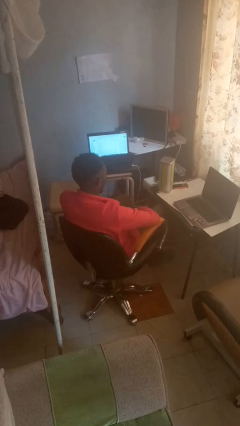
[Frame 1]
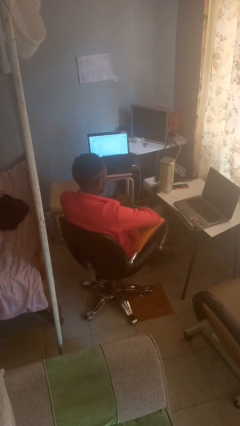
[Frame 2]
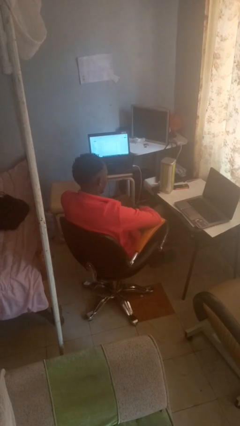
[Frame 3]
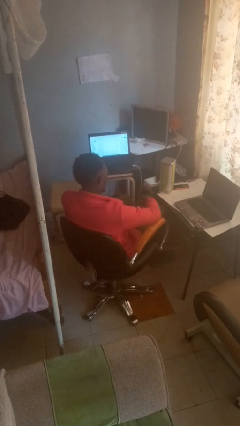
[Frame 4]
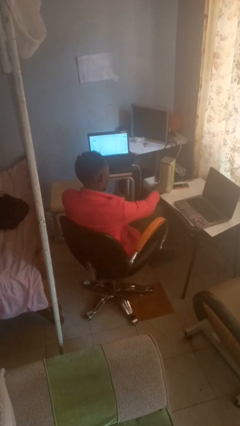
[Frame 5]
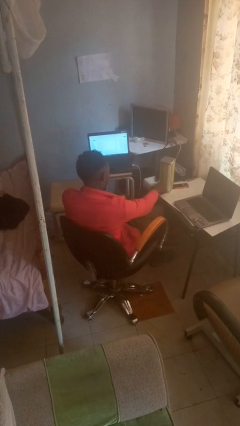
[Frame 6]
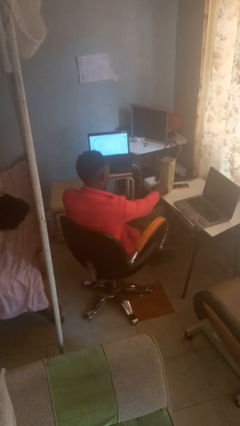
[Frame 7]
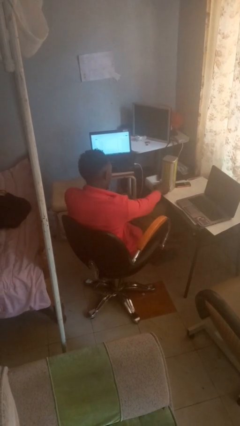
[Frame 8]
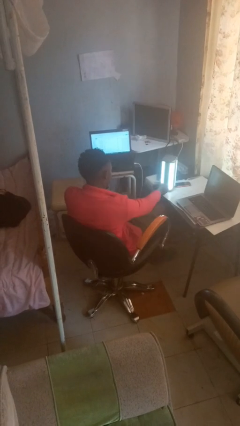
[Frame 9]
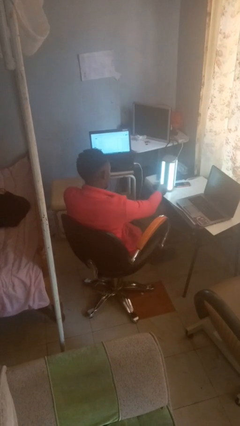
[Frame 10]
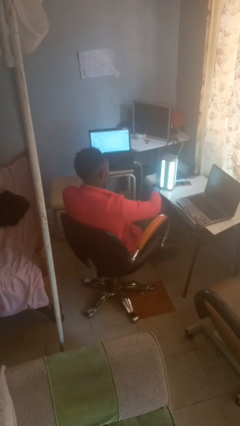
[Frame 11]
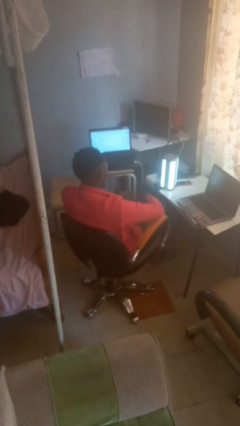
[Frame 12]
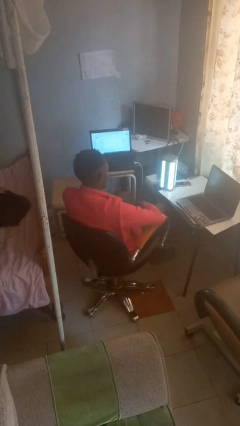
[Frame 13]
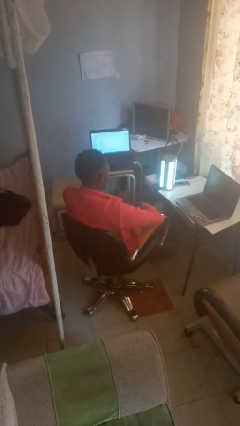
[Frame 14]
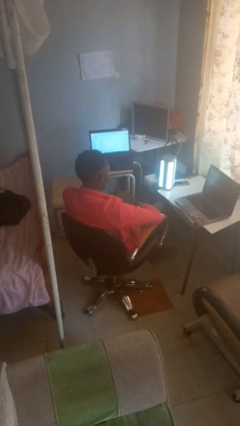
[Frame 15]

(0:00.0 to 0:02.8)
person turns on lamp

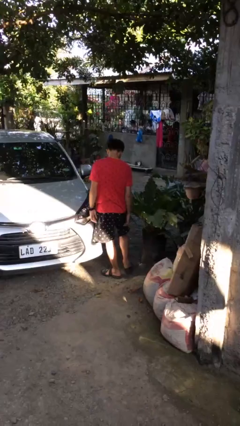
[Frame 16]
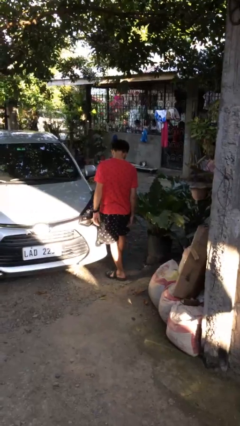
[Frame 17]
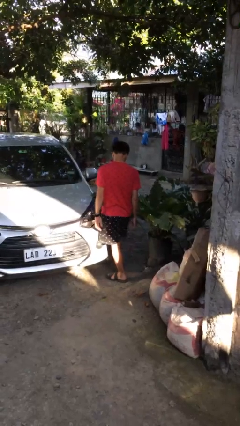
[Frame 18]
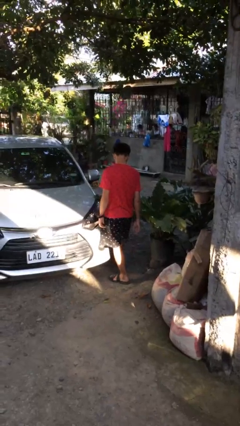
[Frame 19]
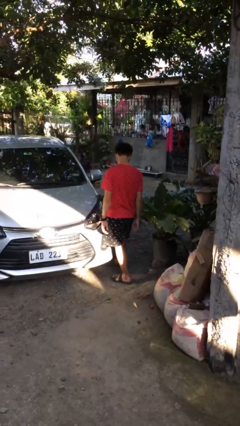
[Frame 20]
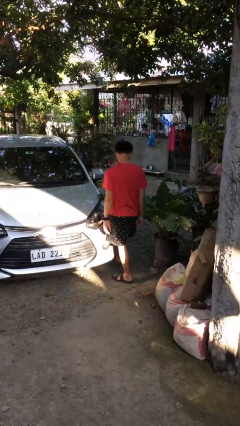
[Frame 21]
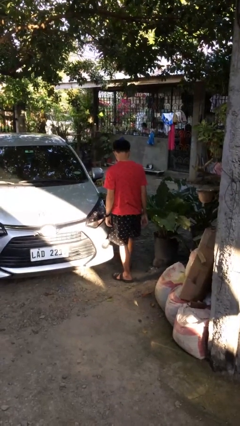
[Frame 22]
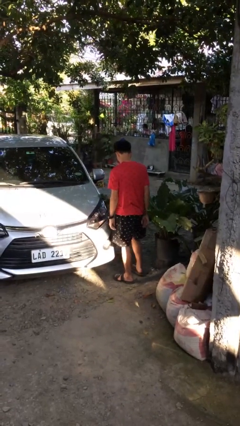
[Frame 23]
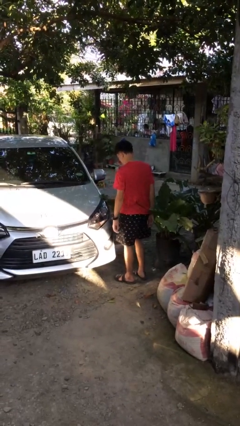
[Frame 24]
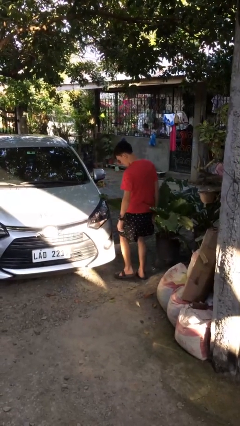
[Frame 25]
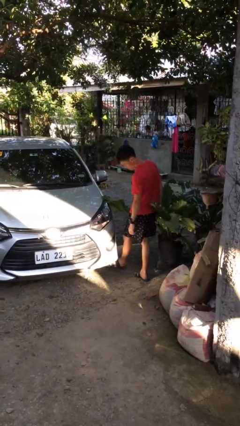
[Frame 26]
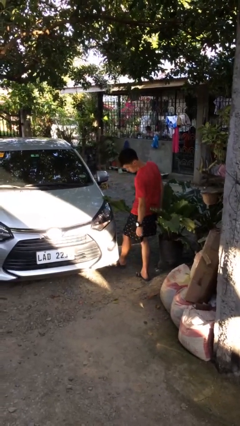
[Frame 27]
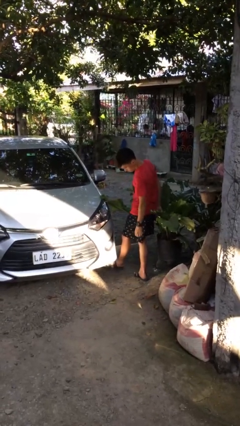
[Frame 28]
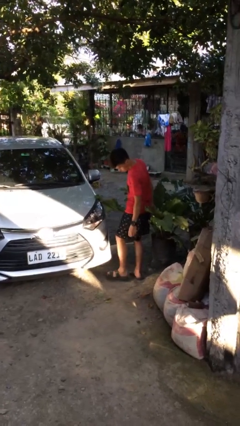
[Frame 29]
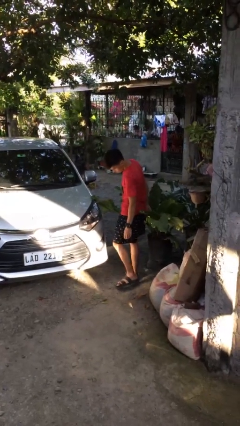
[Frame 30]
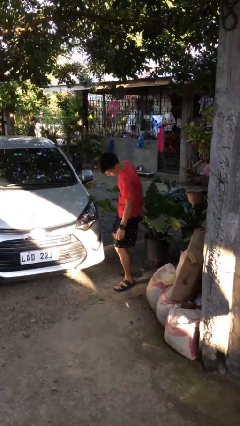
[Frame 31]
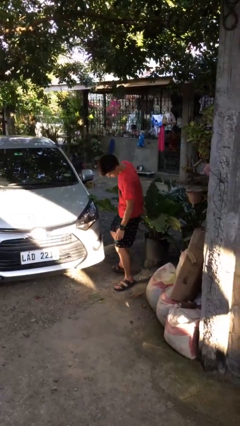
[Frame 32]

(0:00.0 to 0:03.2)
person kicks car tires

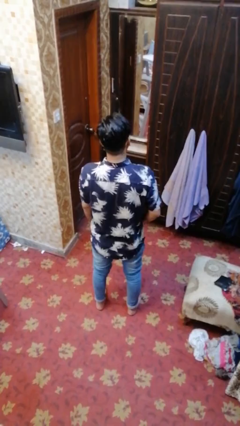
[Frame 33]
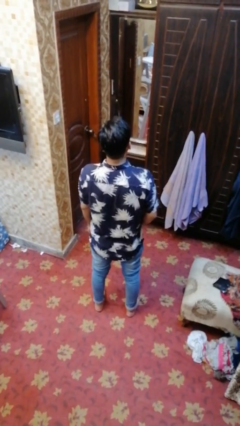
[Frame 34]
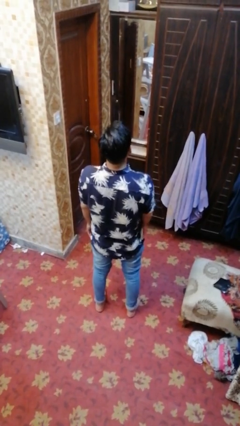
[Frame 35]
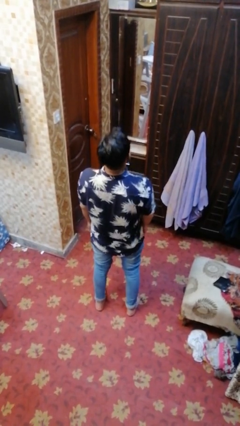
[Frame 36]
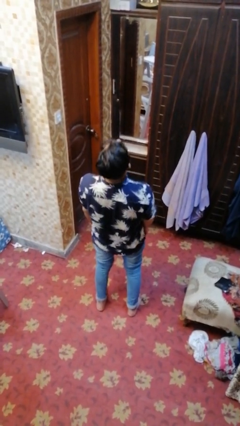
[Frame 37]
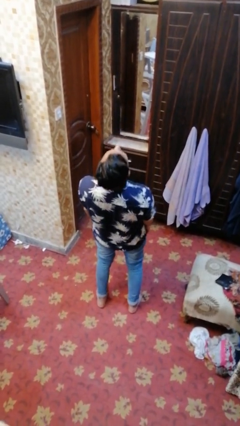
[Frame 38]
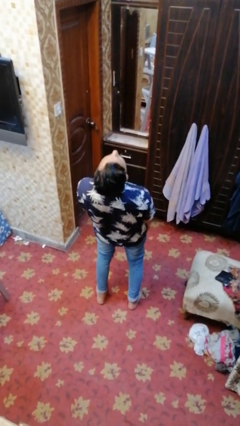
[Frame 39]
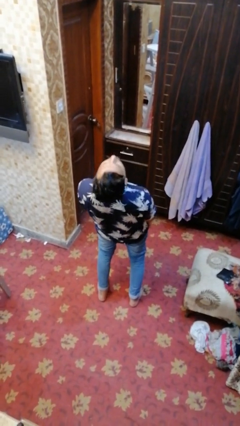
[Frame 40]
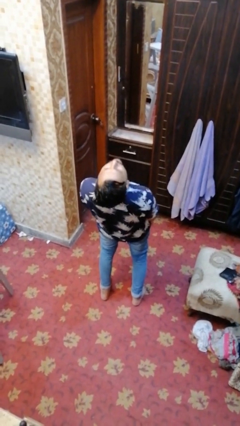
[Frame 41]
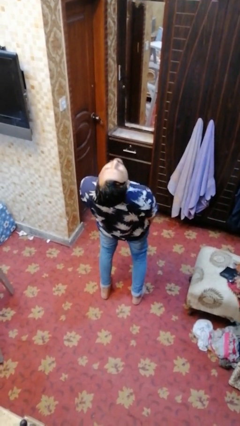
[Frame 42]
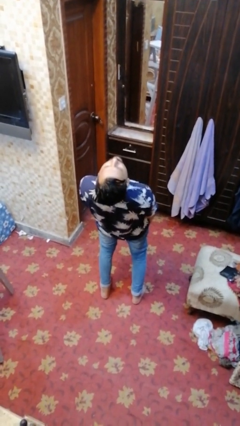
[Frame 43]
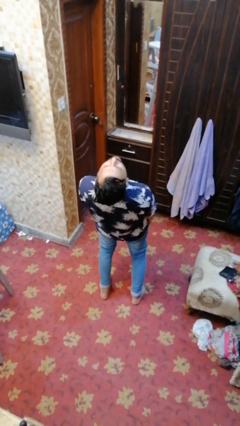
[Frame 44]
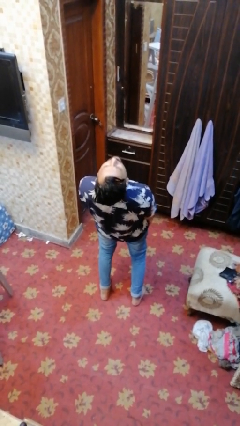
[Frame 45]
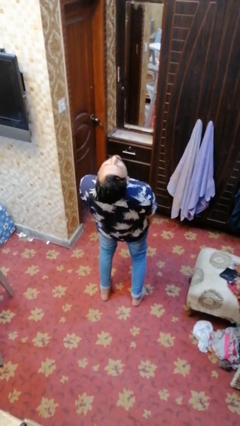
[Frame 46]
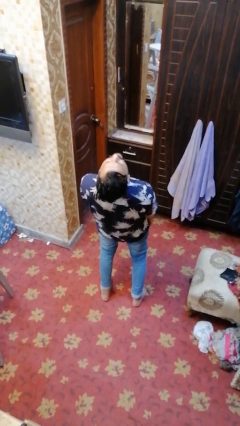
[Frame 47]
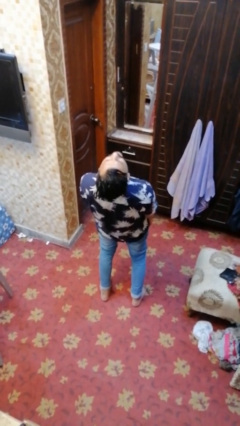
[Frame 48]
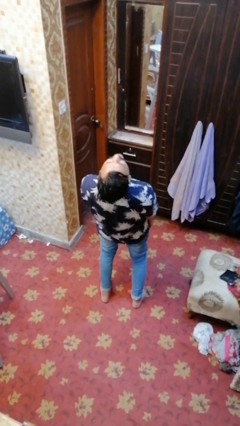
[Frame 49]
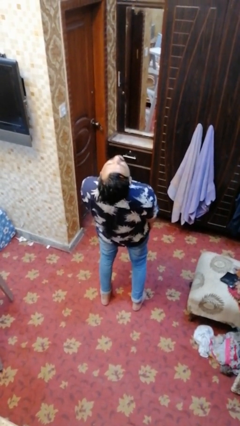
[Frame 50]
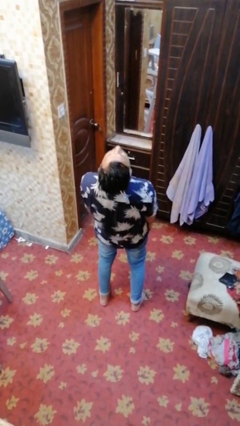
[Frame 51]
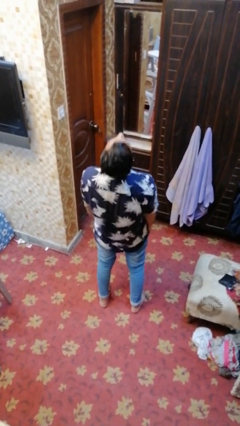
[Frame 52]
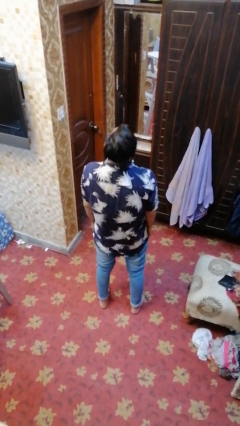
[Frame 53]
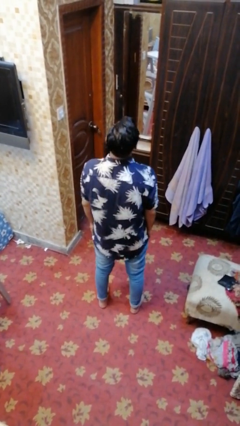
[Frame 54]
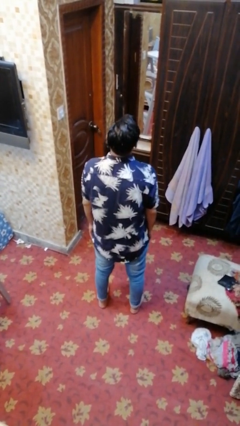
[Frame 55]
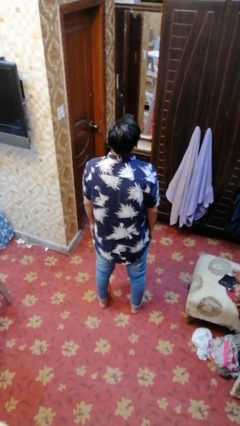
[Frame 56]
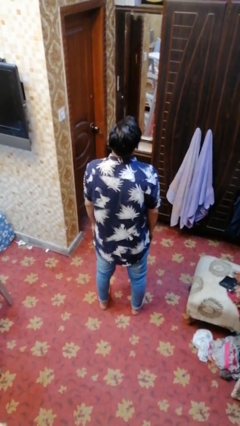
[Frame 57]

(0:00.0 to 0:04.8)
person stretches back

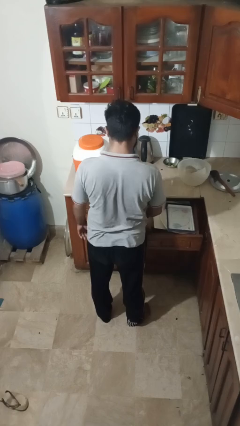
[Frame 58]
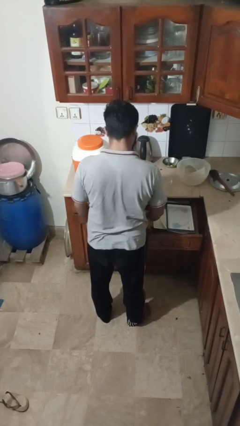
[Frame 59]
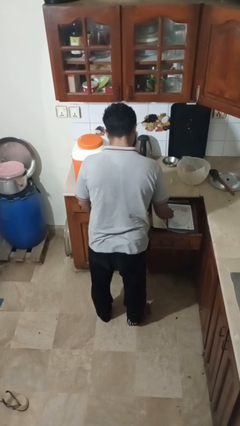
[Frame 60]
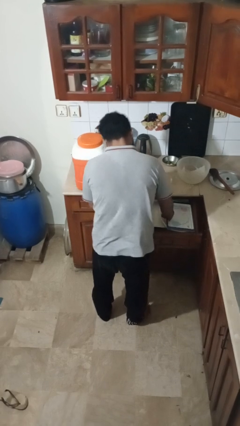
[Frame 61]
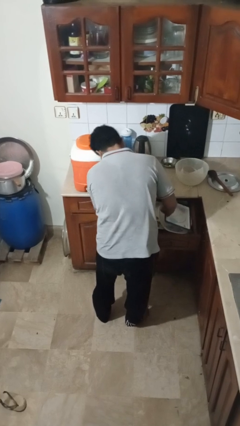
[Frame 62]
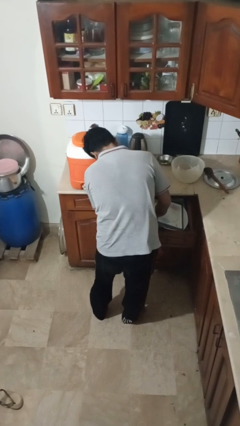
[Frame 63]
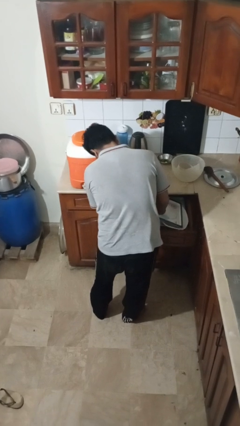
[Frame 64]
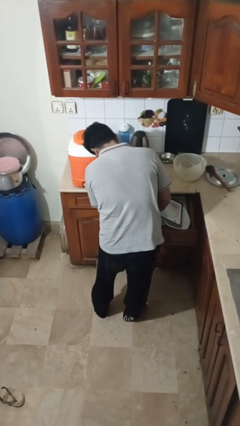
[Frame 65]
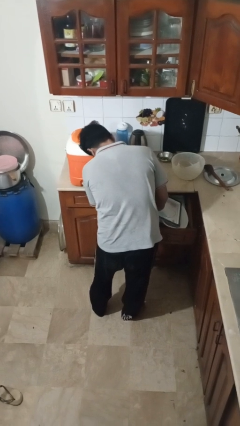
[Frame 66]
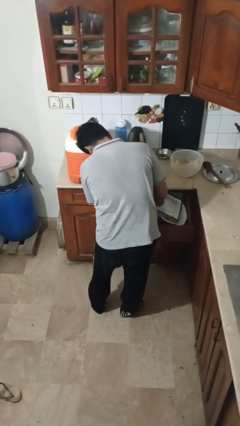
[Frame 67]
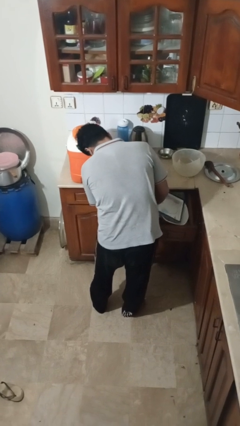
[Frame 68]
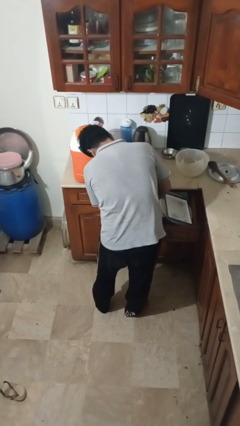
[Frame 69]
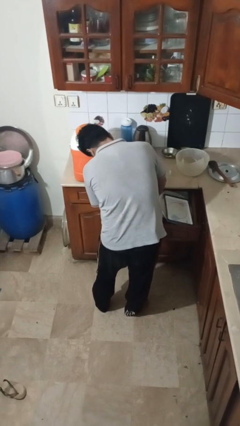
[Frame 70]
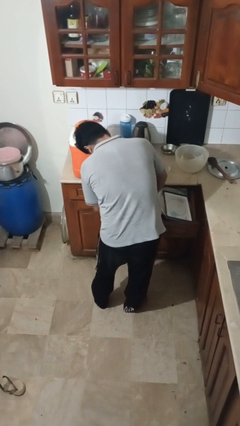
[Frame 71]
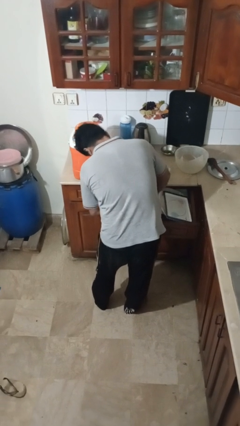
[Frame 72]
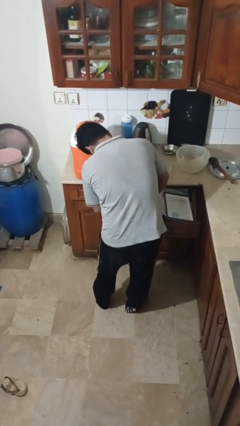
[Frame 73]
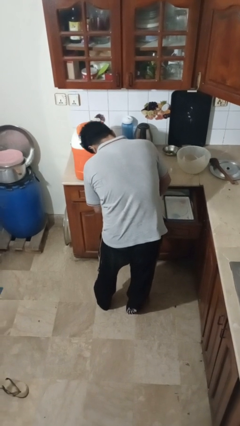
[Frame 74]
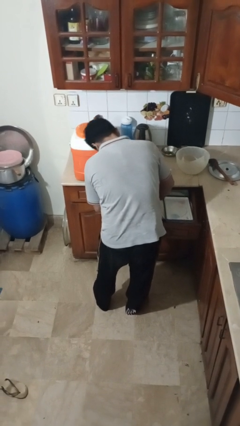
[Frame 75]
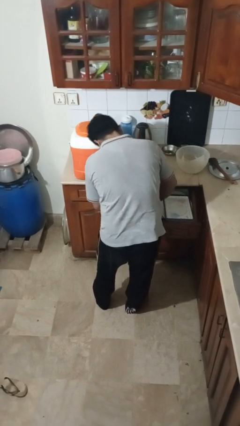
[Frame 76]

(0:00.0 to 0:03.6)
person searches in kitchen drawer

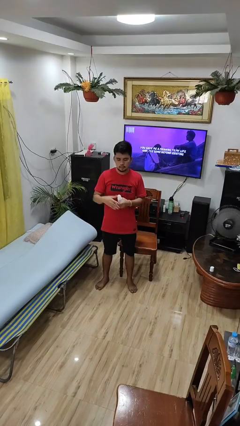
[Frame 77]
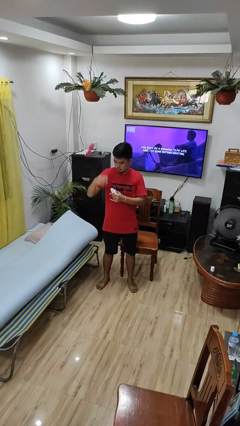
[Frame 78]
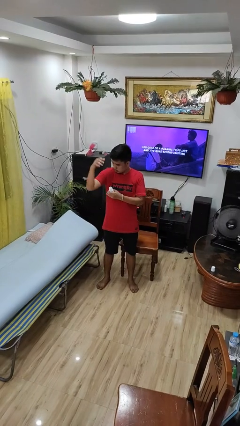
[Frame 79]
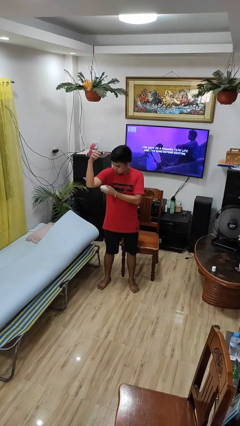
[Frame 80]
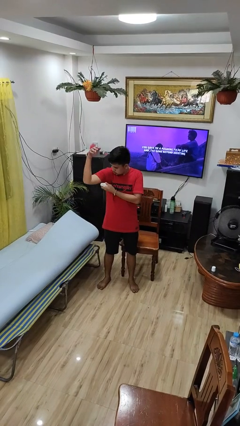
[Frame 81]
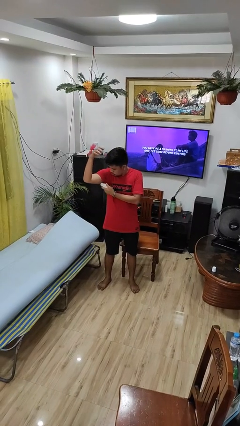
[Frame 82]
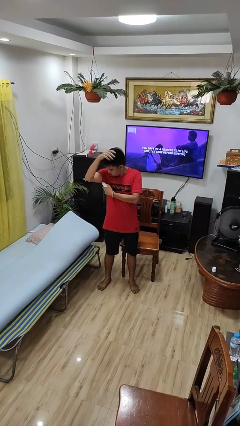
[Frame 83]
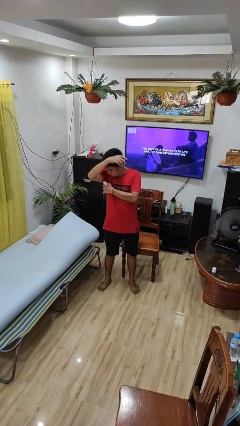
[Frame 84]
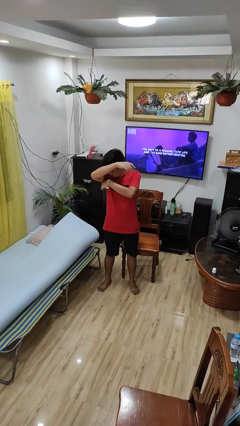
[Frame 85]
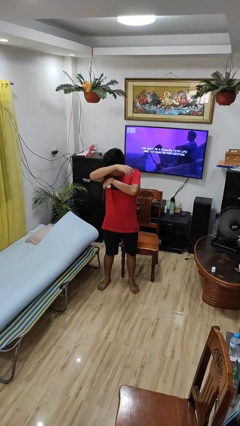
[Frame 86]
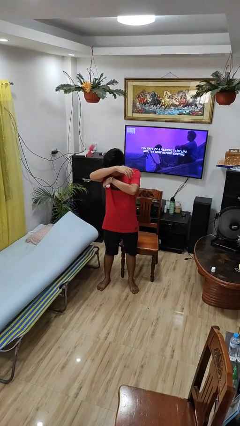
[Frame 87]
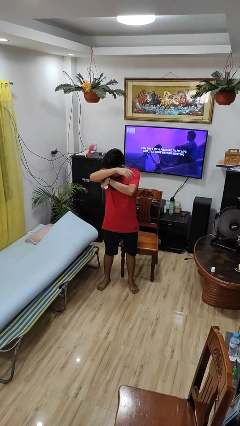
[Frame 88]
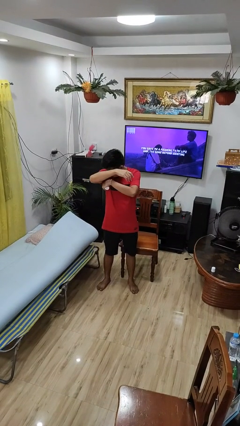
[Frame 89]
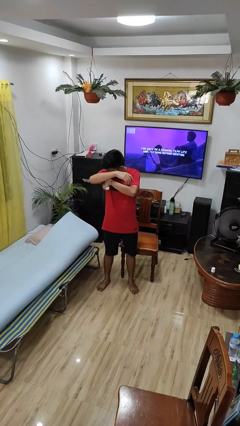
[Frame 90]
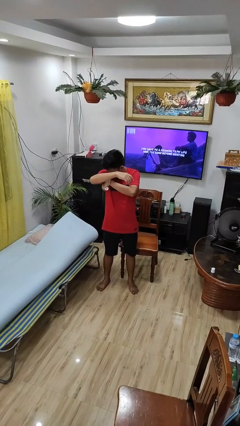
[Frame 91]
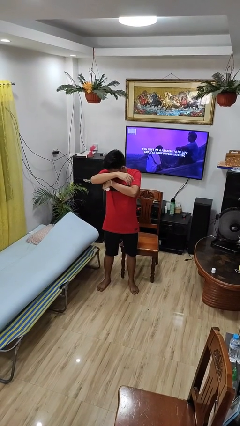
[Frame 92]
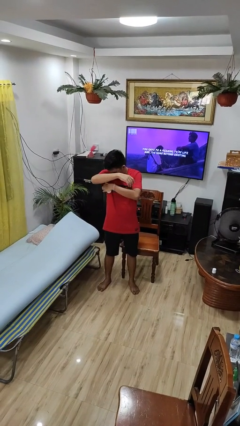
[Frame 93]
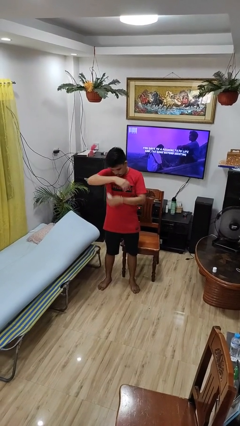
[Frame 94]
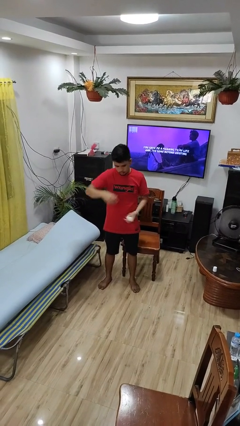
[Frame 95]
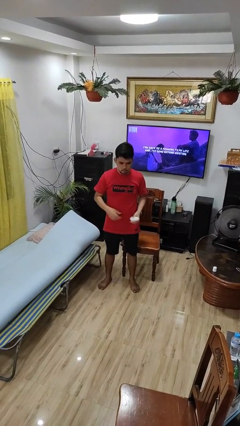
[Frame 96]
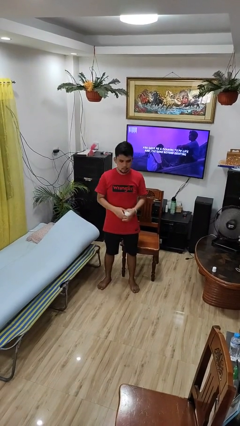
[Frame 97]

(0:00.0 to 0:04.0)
person applies deodorant
